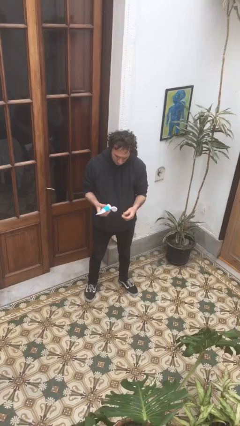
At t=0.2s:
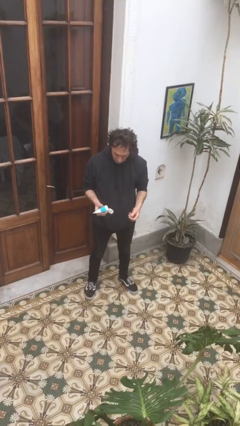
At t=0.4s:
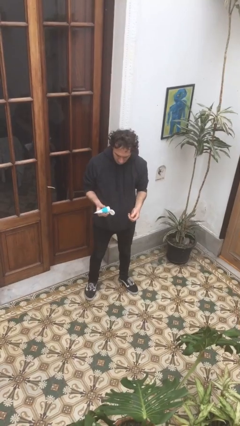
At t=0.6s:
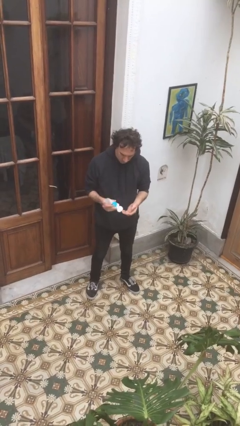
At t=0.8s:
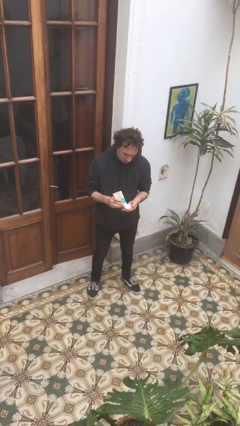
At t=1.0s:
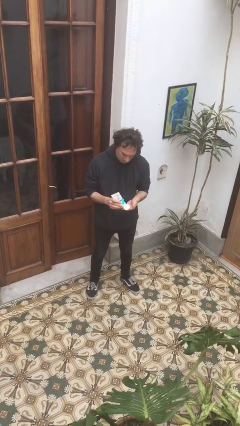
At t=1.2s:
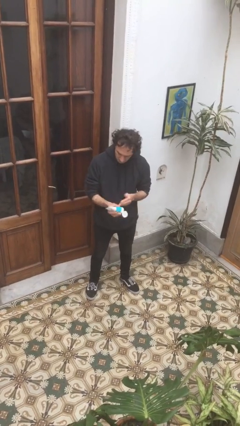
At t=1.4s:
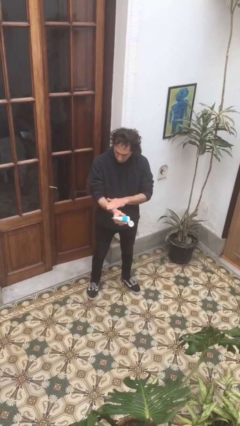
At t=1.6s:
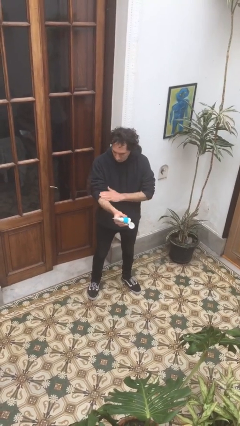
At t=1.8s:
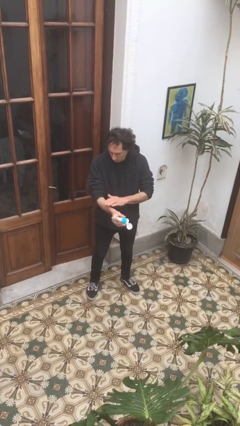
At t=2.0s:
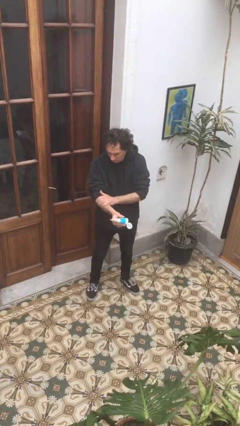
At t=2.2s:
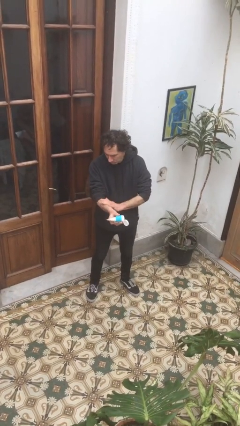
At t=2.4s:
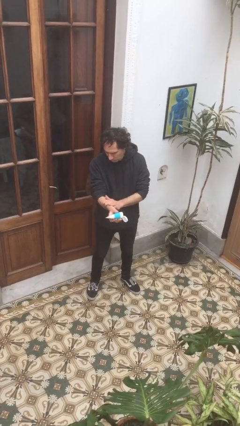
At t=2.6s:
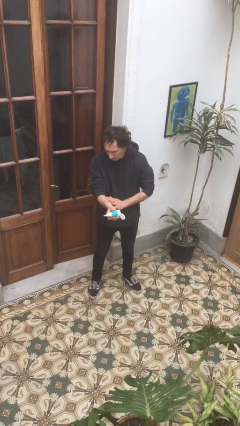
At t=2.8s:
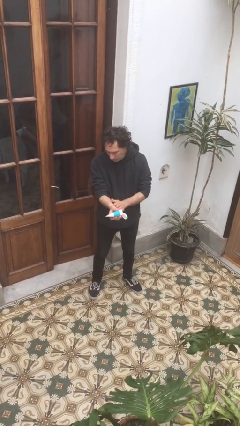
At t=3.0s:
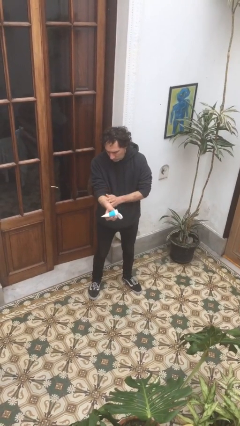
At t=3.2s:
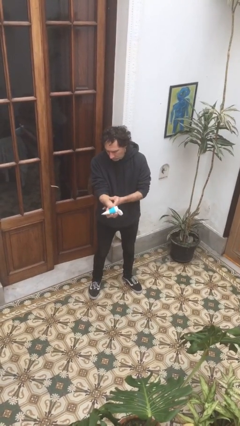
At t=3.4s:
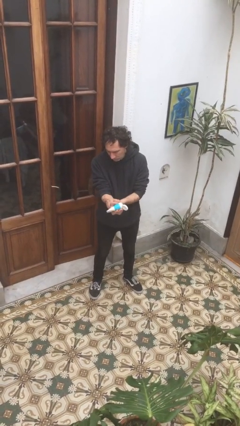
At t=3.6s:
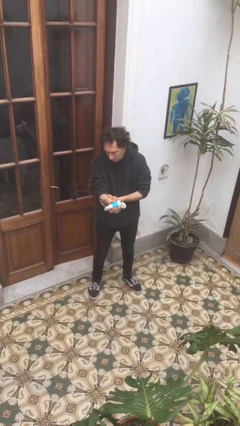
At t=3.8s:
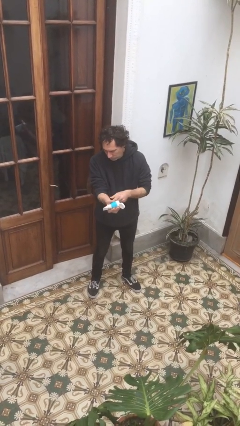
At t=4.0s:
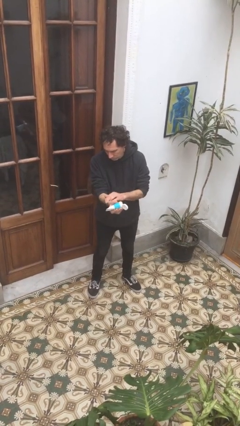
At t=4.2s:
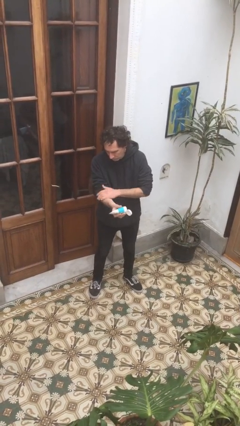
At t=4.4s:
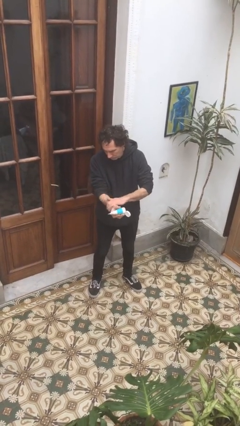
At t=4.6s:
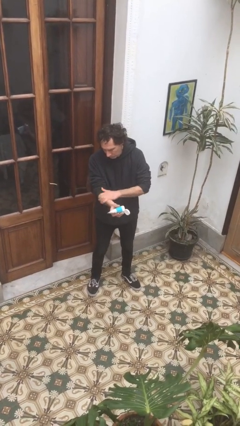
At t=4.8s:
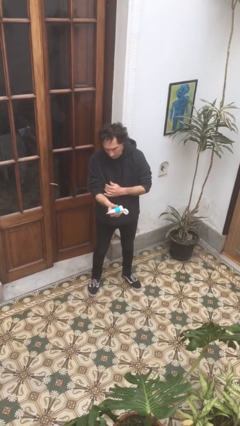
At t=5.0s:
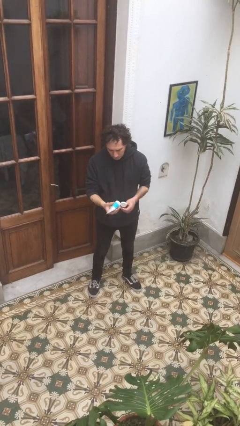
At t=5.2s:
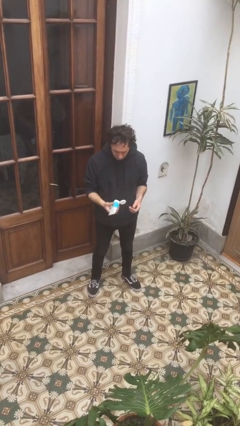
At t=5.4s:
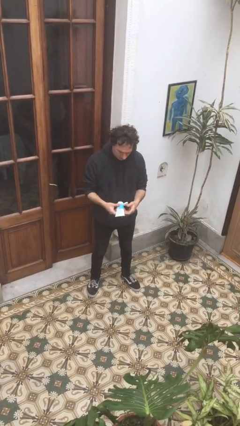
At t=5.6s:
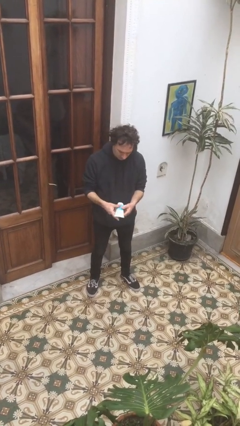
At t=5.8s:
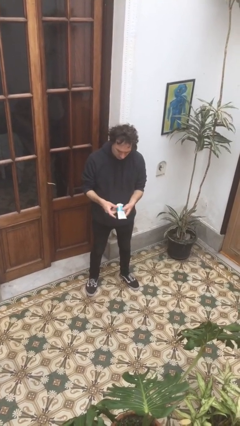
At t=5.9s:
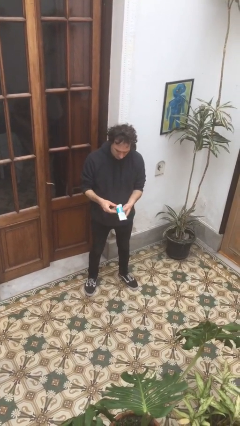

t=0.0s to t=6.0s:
person applies sunscreen

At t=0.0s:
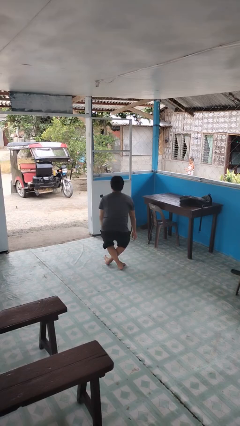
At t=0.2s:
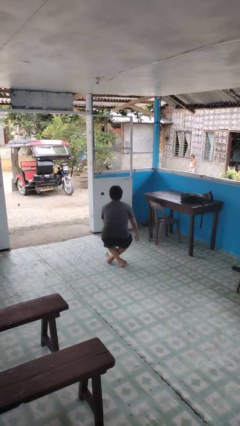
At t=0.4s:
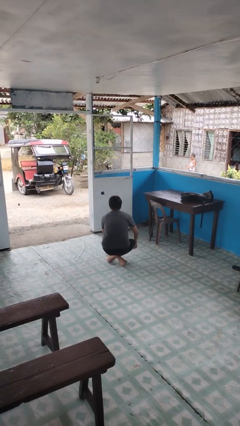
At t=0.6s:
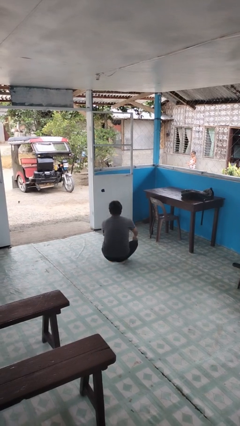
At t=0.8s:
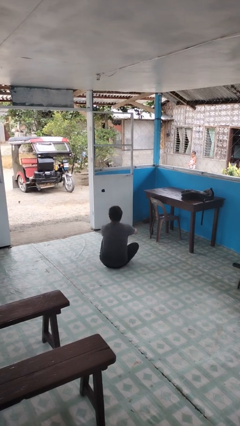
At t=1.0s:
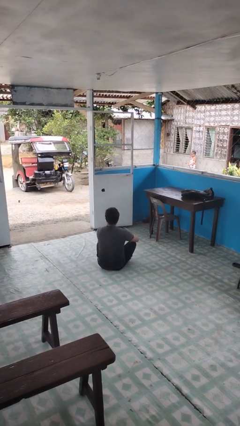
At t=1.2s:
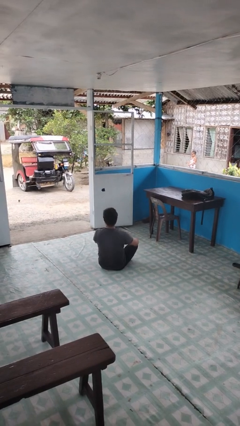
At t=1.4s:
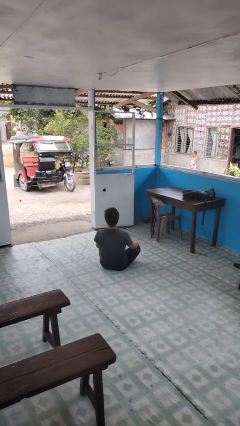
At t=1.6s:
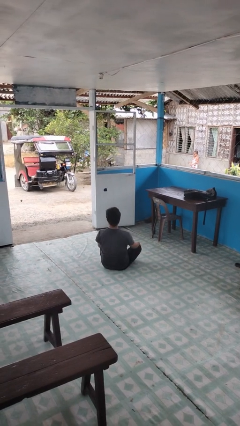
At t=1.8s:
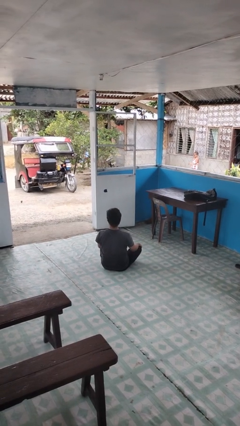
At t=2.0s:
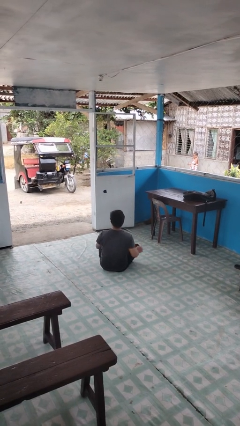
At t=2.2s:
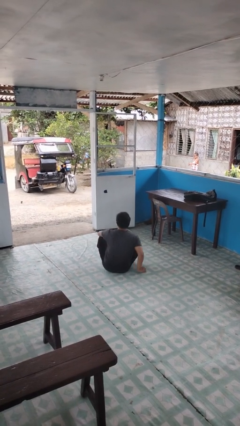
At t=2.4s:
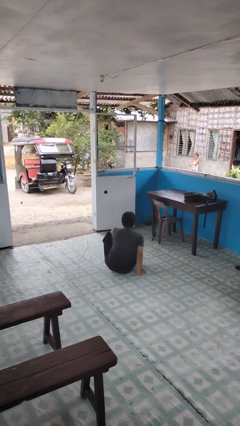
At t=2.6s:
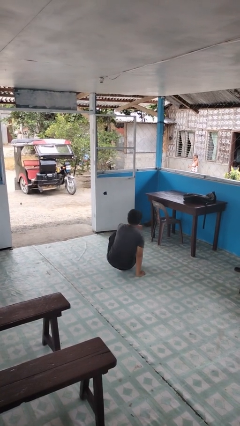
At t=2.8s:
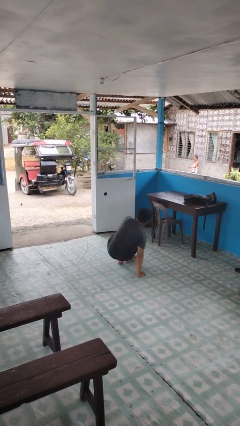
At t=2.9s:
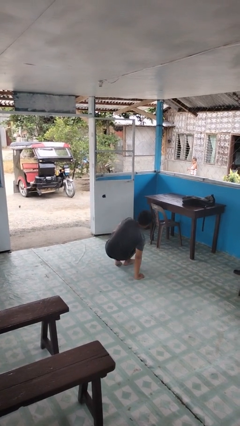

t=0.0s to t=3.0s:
person sits crisscross

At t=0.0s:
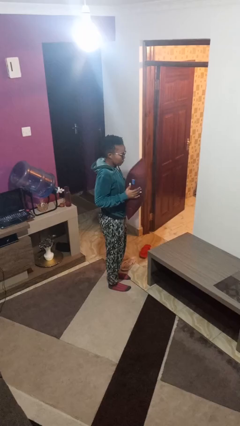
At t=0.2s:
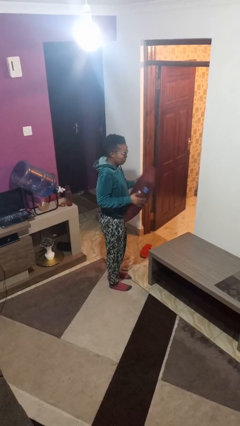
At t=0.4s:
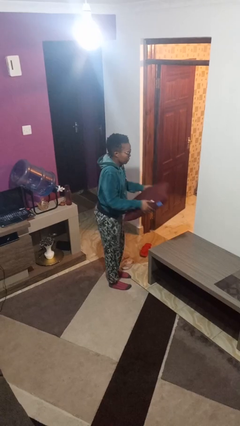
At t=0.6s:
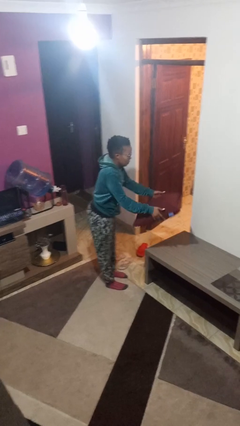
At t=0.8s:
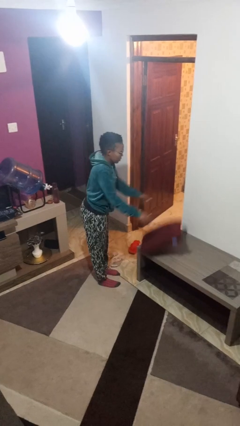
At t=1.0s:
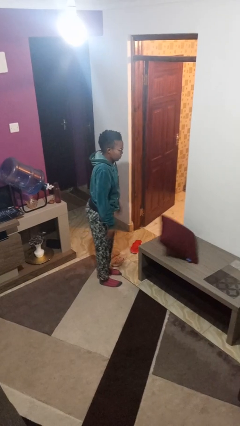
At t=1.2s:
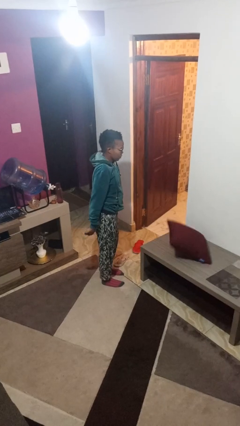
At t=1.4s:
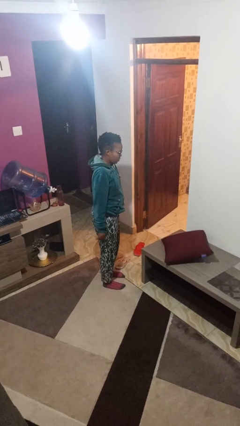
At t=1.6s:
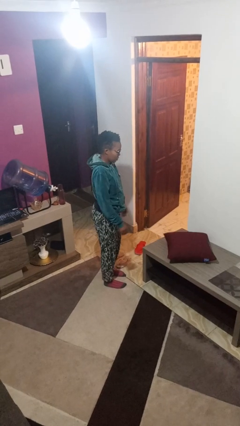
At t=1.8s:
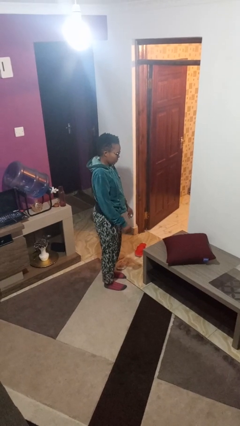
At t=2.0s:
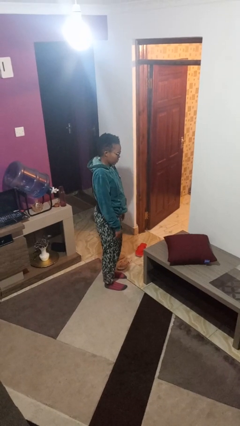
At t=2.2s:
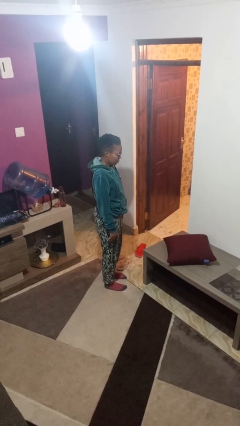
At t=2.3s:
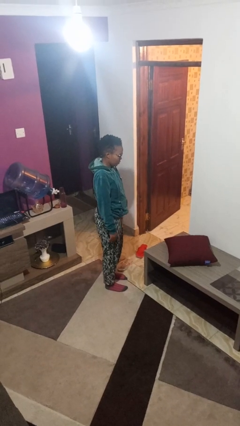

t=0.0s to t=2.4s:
person throws object on table

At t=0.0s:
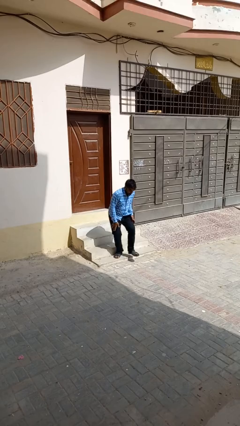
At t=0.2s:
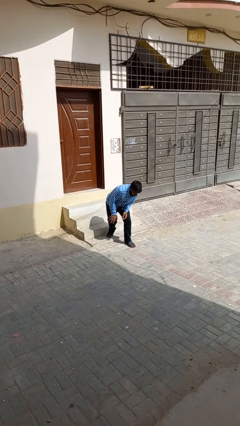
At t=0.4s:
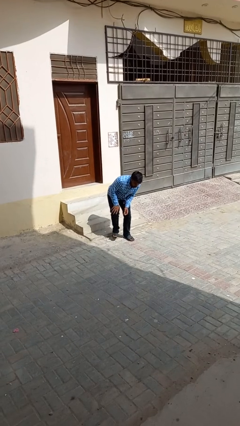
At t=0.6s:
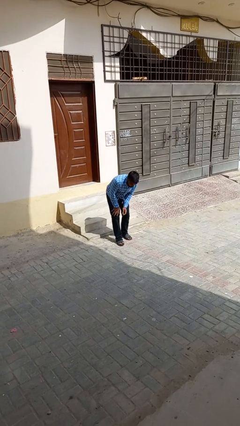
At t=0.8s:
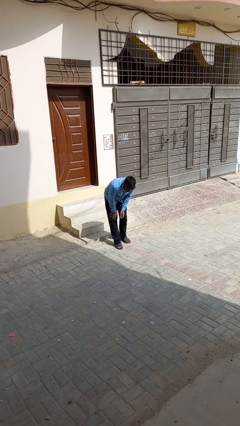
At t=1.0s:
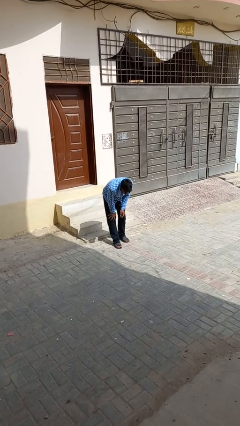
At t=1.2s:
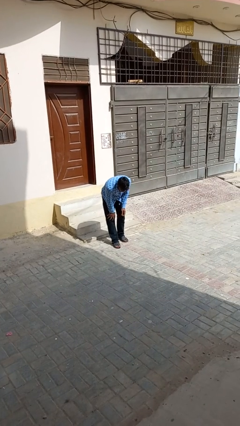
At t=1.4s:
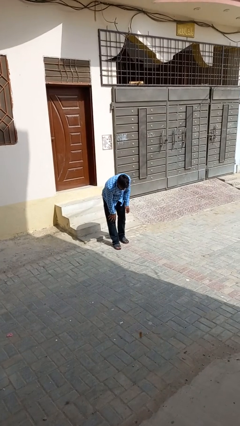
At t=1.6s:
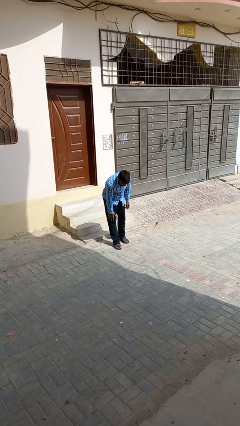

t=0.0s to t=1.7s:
person trips on stair

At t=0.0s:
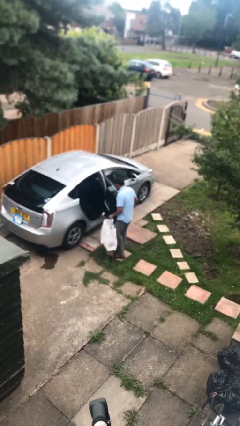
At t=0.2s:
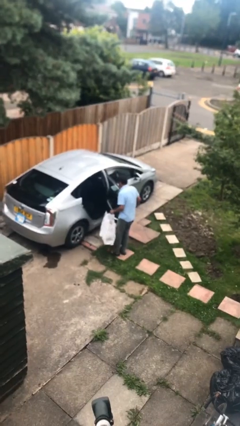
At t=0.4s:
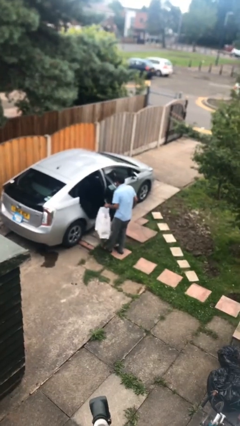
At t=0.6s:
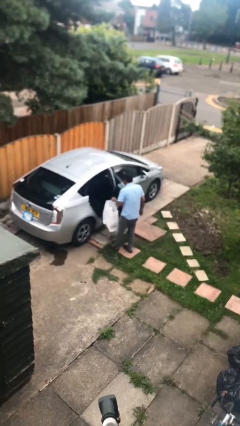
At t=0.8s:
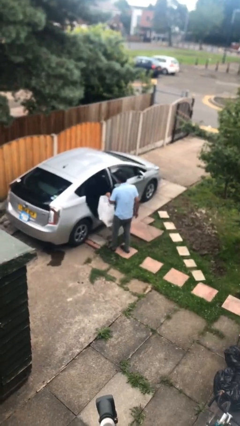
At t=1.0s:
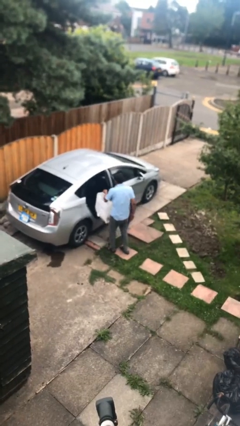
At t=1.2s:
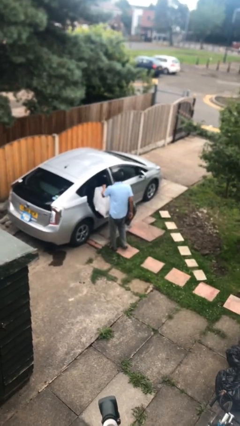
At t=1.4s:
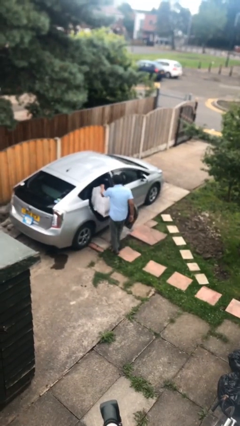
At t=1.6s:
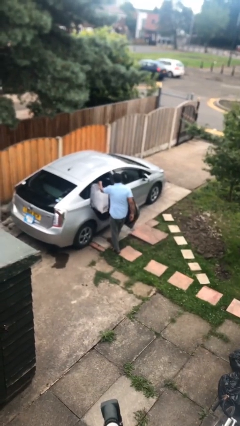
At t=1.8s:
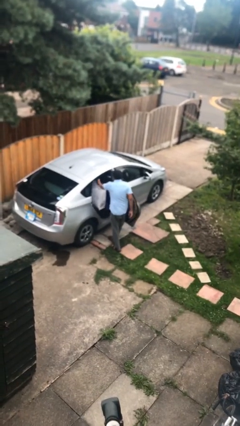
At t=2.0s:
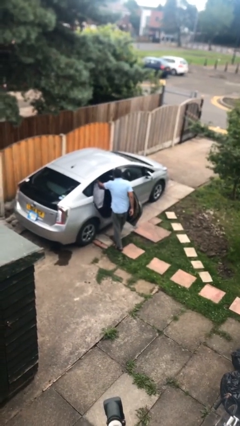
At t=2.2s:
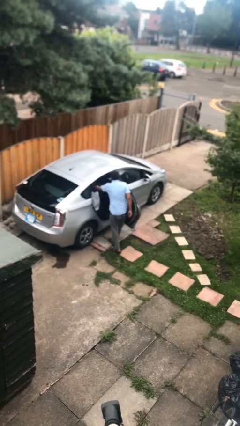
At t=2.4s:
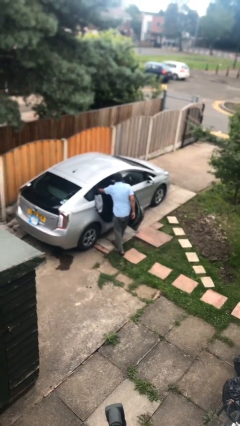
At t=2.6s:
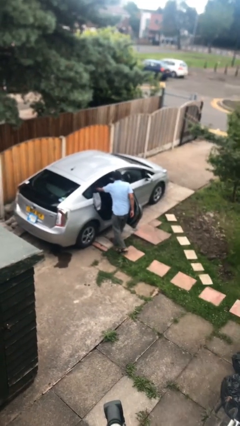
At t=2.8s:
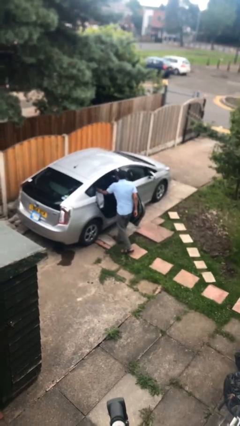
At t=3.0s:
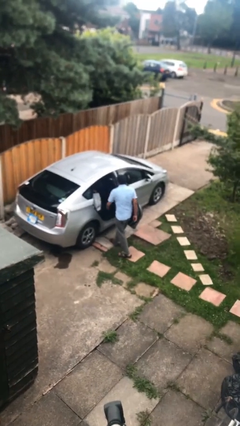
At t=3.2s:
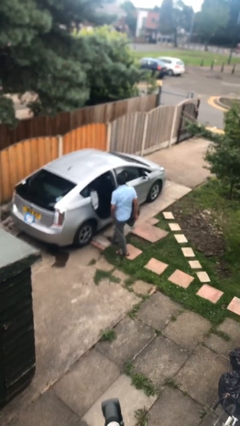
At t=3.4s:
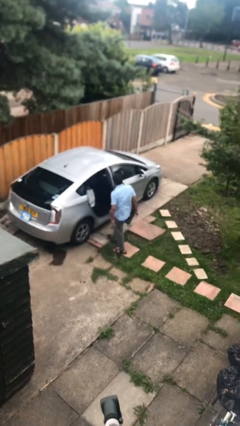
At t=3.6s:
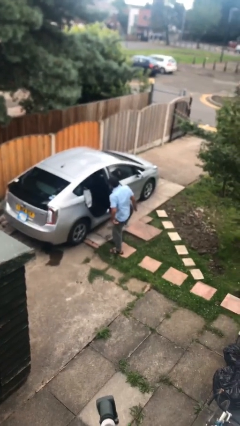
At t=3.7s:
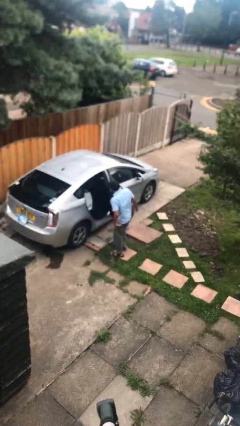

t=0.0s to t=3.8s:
person loads car

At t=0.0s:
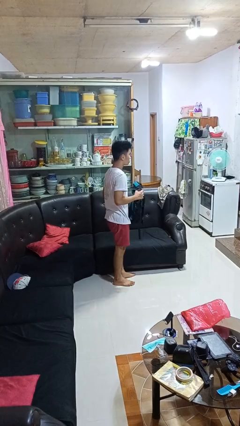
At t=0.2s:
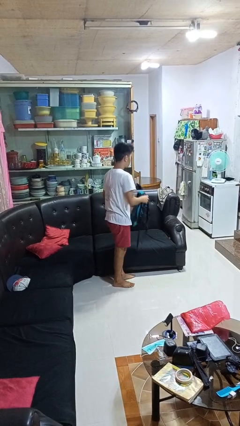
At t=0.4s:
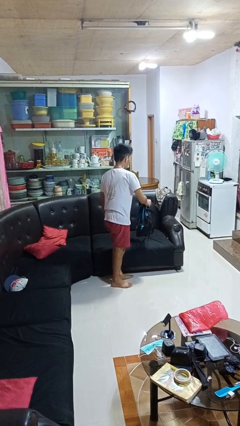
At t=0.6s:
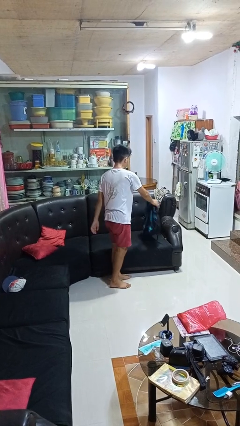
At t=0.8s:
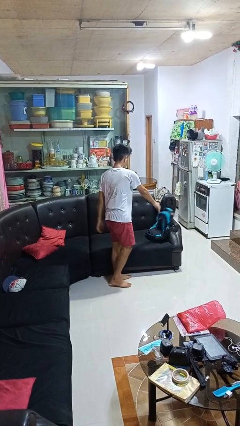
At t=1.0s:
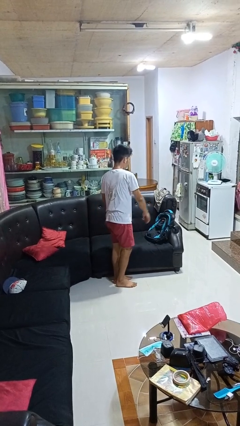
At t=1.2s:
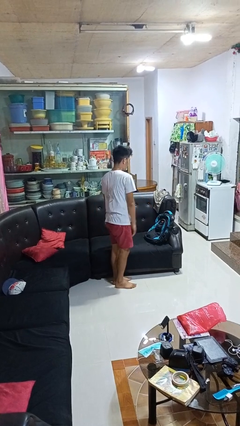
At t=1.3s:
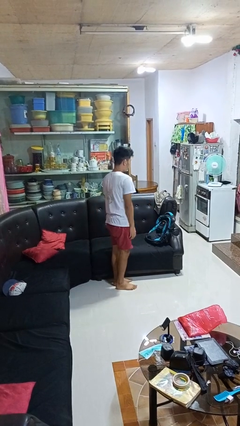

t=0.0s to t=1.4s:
person puts down object on couch
